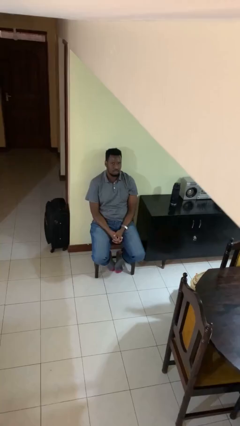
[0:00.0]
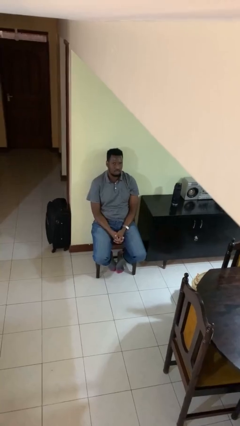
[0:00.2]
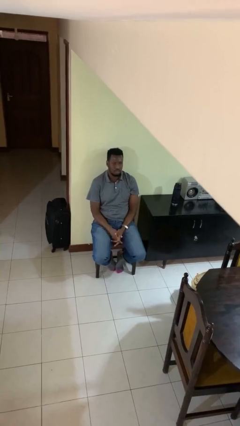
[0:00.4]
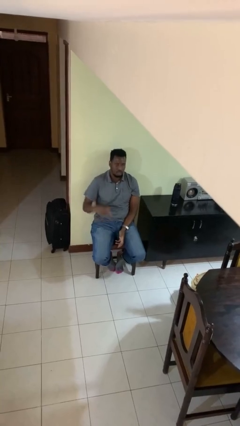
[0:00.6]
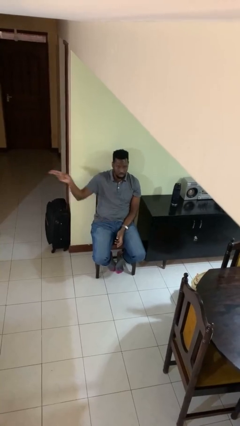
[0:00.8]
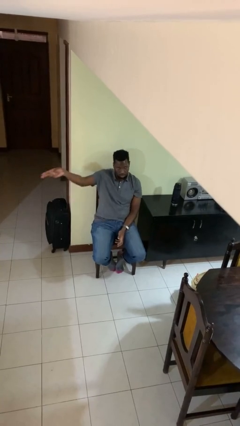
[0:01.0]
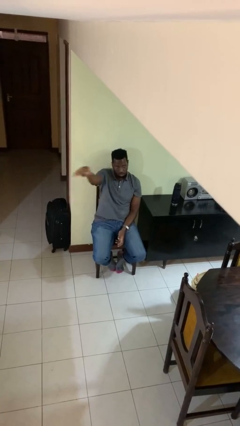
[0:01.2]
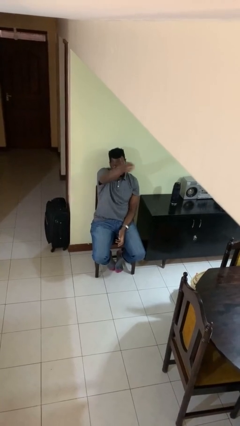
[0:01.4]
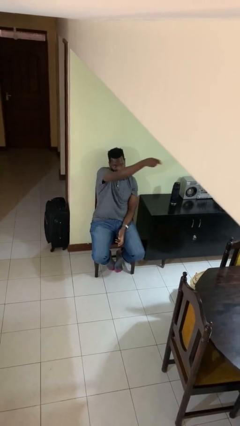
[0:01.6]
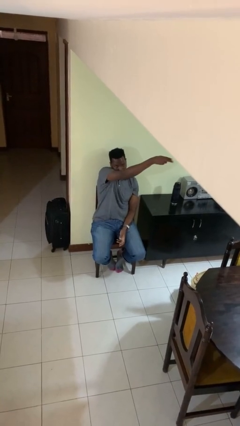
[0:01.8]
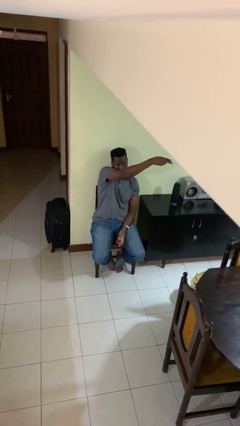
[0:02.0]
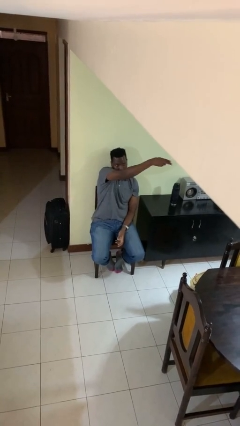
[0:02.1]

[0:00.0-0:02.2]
person gestures swipe left

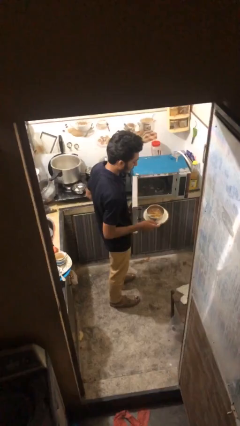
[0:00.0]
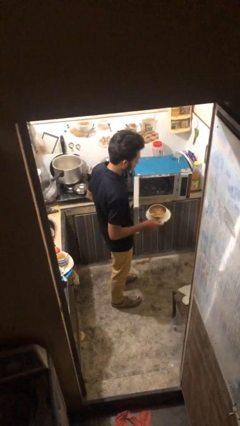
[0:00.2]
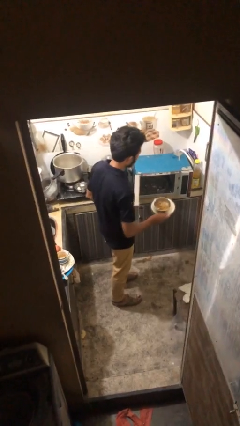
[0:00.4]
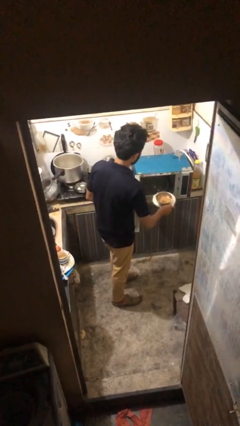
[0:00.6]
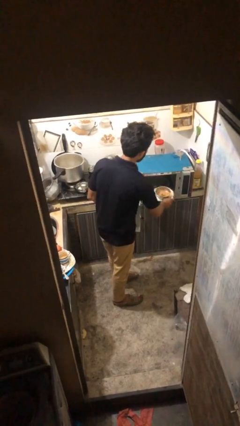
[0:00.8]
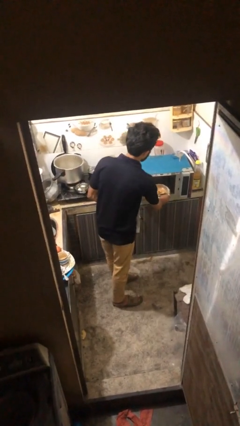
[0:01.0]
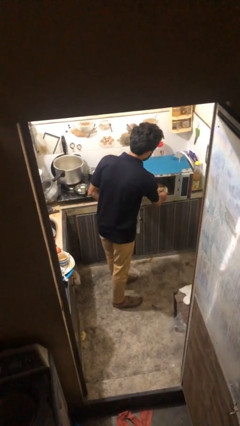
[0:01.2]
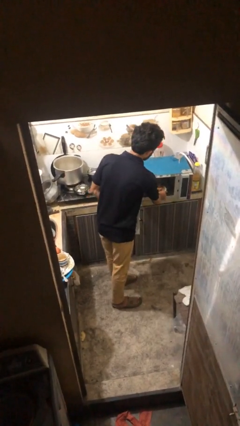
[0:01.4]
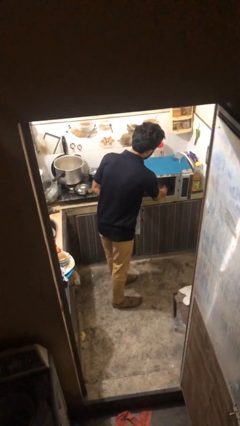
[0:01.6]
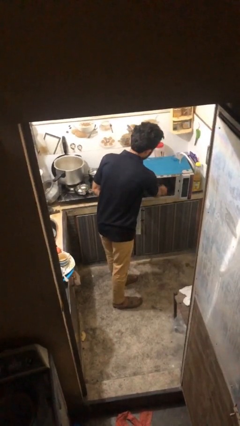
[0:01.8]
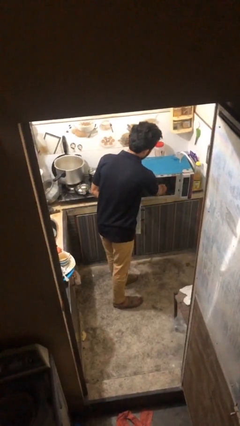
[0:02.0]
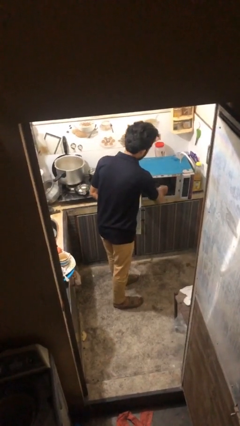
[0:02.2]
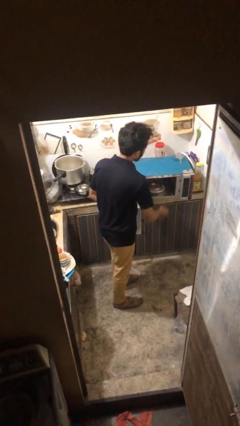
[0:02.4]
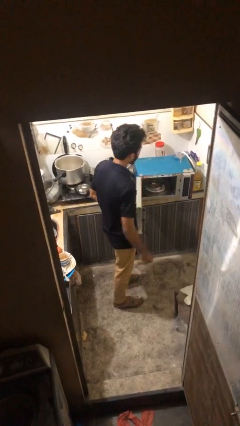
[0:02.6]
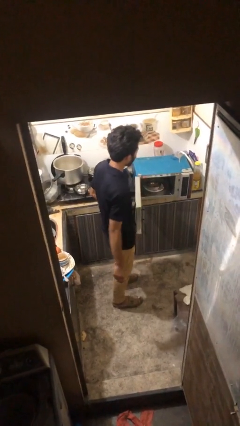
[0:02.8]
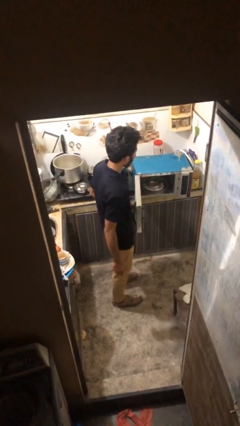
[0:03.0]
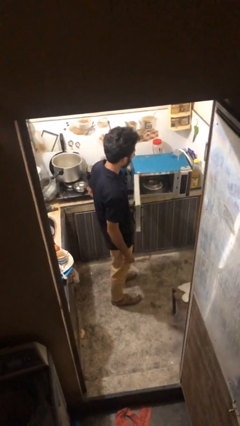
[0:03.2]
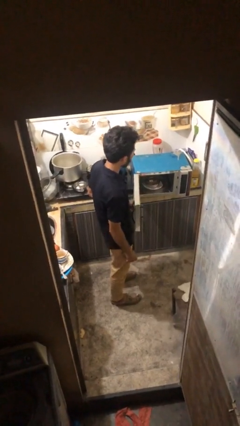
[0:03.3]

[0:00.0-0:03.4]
person puts object into microwave

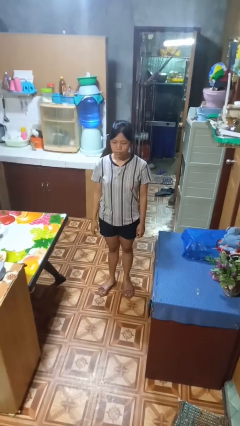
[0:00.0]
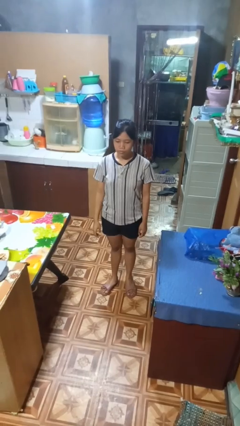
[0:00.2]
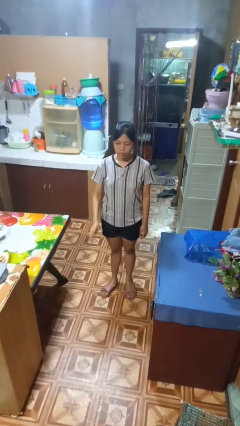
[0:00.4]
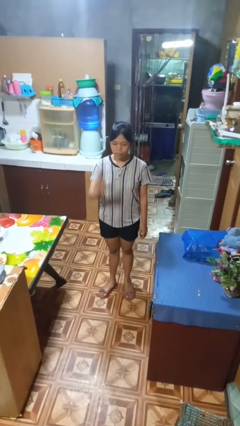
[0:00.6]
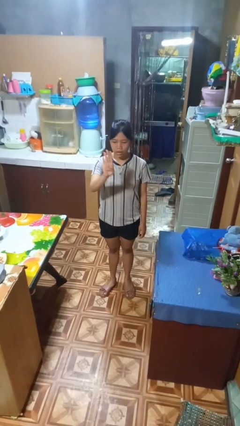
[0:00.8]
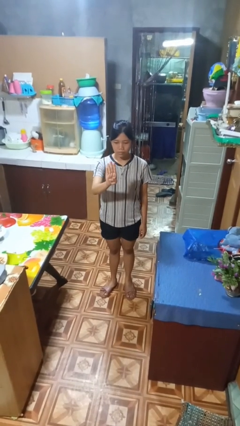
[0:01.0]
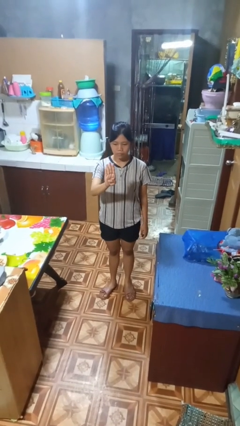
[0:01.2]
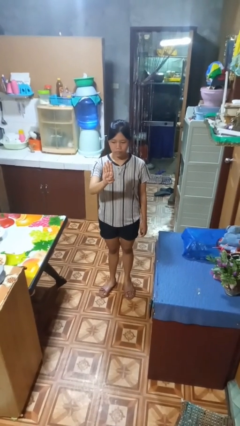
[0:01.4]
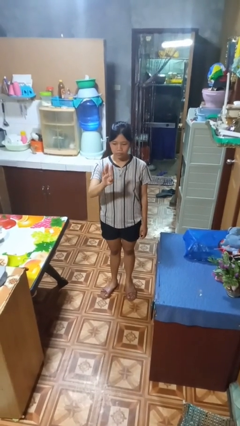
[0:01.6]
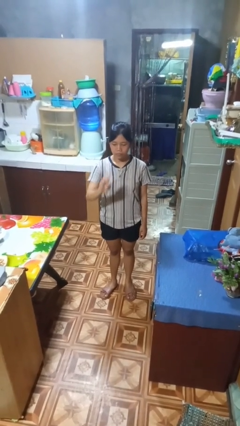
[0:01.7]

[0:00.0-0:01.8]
person gestures number four

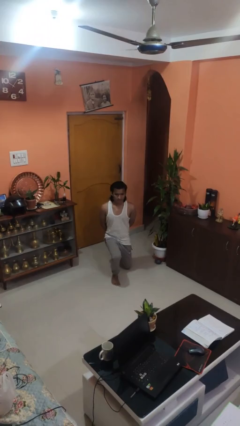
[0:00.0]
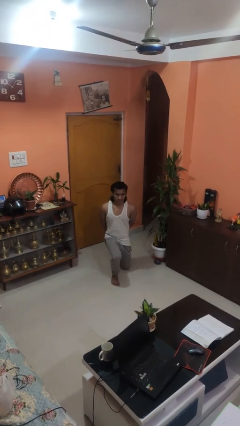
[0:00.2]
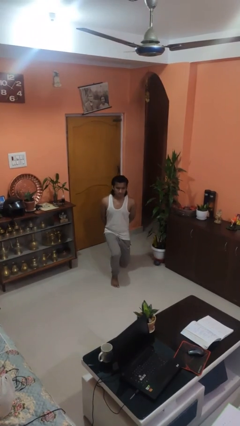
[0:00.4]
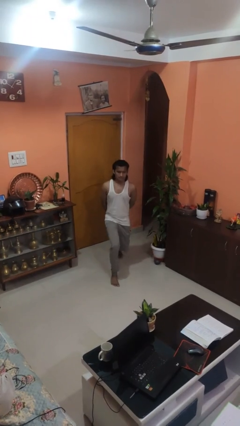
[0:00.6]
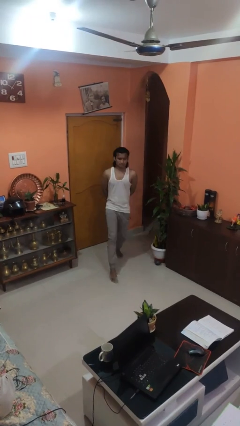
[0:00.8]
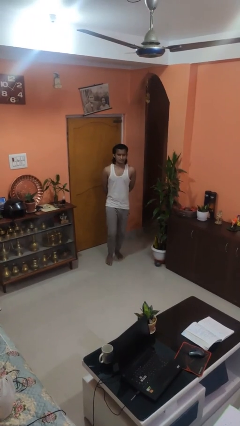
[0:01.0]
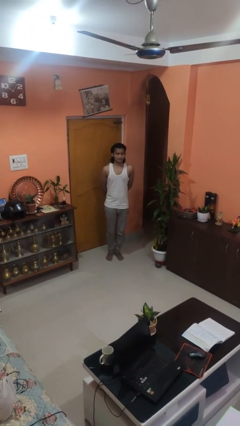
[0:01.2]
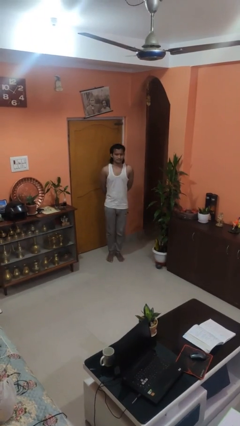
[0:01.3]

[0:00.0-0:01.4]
person stands up from floor

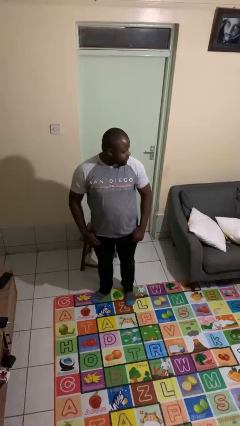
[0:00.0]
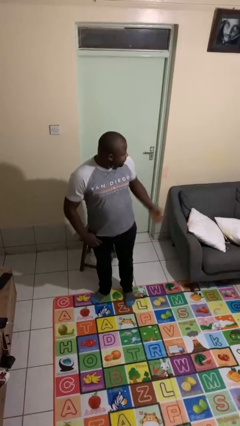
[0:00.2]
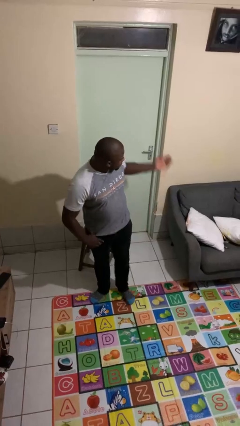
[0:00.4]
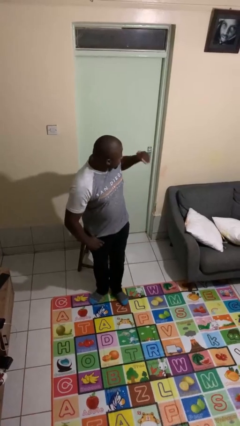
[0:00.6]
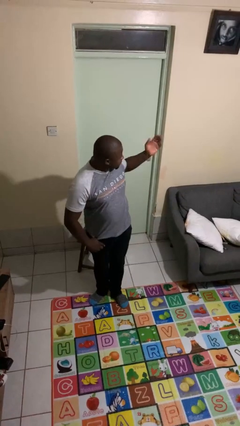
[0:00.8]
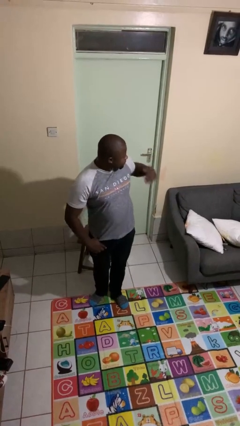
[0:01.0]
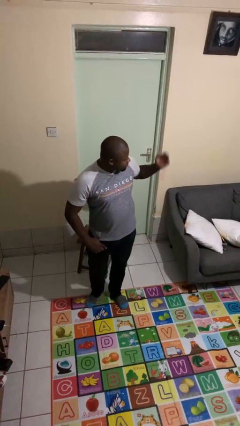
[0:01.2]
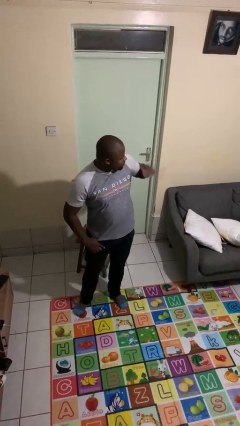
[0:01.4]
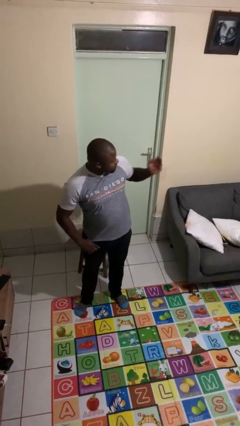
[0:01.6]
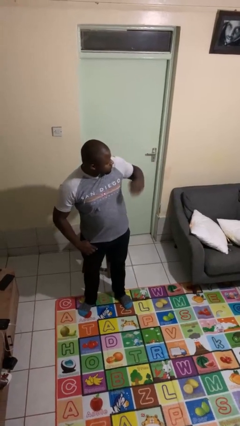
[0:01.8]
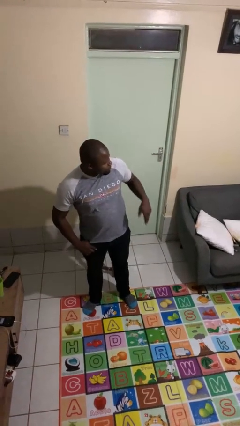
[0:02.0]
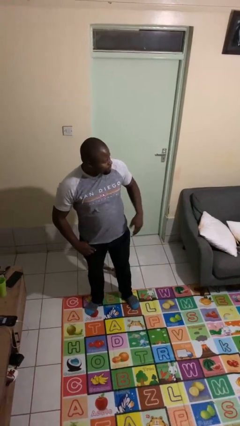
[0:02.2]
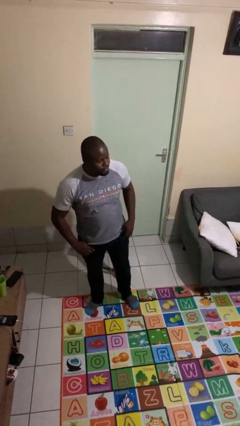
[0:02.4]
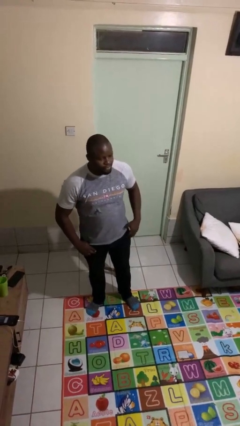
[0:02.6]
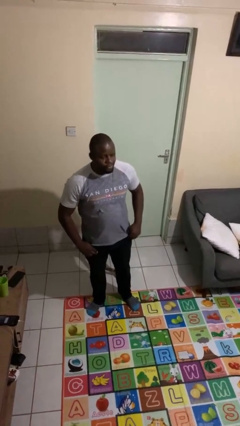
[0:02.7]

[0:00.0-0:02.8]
person gestures come here

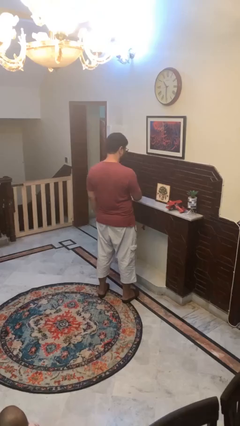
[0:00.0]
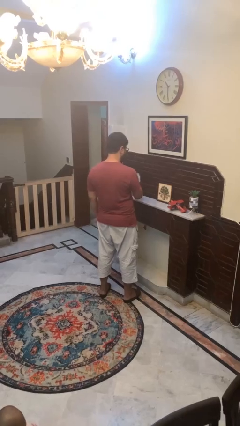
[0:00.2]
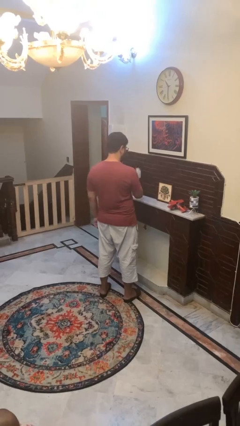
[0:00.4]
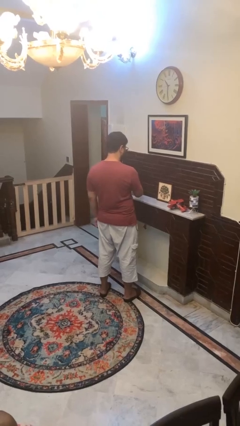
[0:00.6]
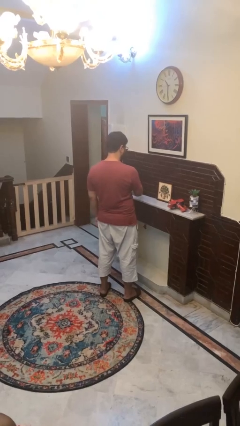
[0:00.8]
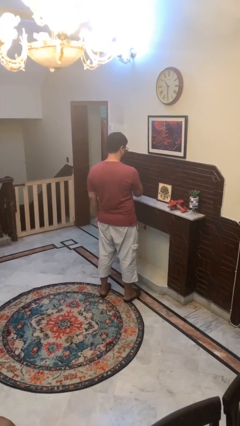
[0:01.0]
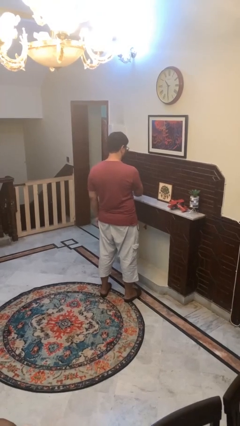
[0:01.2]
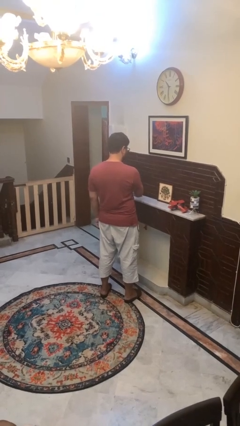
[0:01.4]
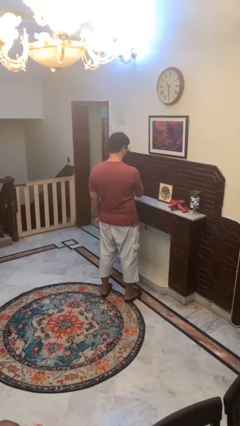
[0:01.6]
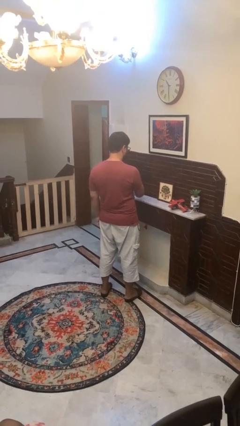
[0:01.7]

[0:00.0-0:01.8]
person dusts furniture

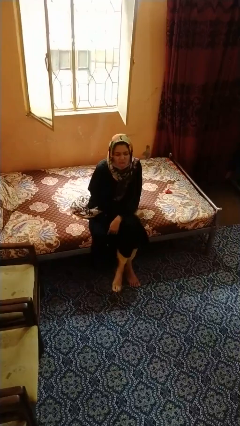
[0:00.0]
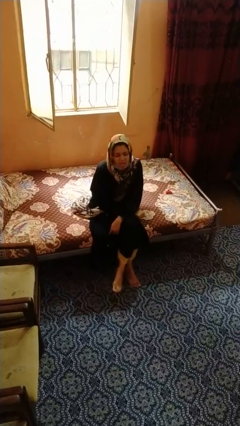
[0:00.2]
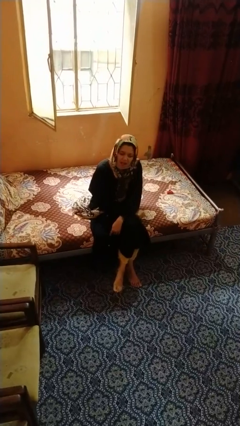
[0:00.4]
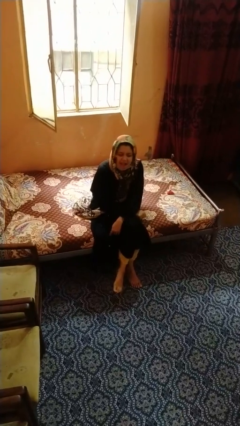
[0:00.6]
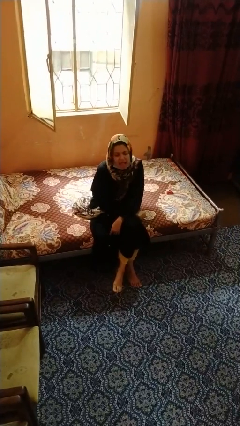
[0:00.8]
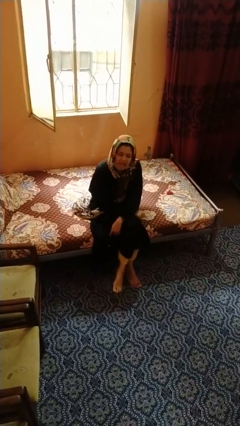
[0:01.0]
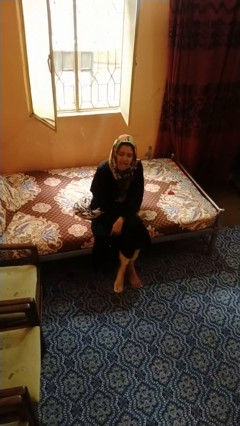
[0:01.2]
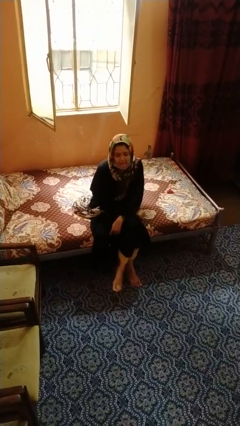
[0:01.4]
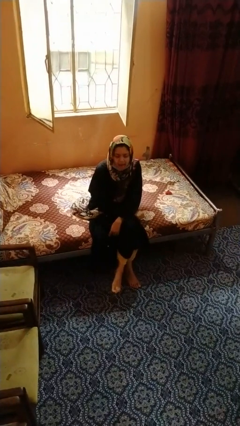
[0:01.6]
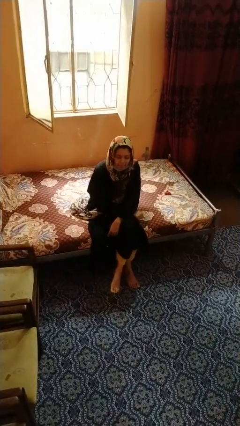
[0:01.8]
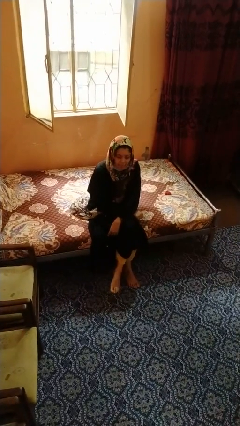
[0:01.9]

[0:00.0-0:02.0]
person sticks out tongue

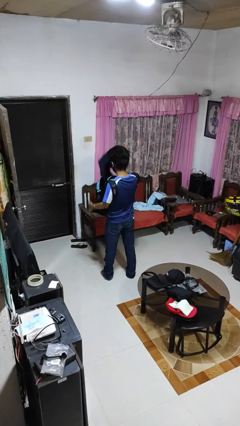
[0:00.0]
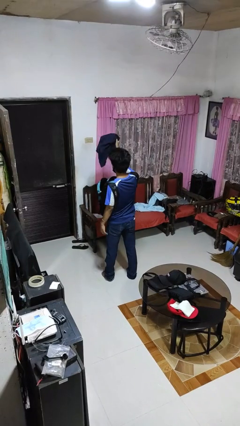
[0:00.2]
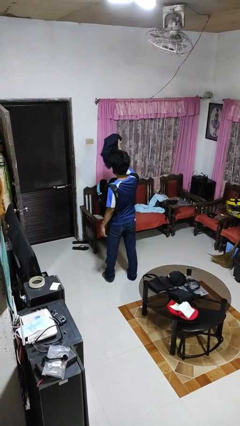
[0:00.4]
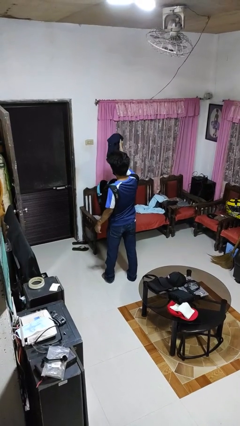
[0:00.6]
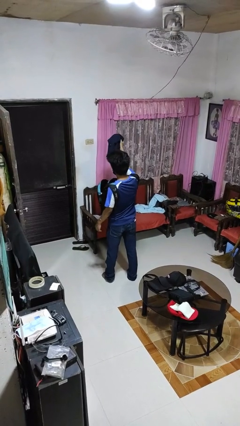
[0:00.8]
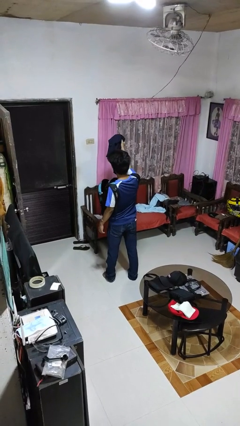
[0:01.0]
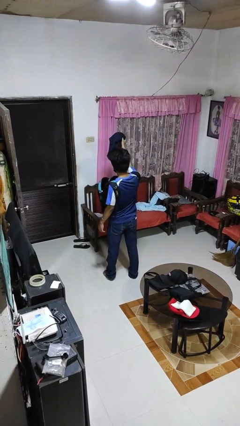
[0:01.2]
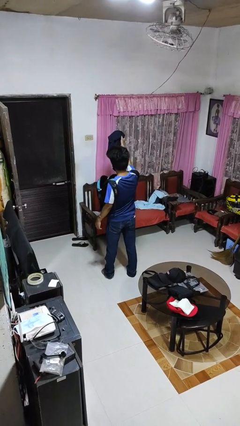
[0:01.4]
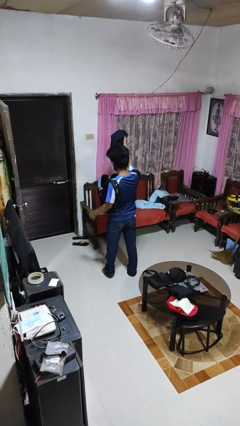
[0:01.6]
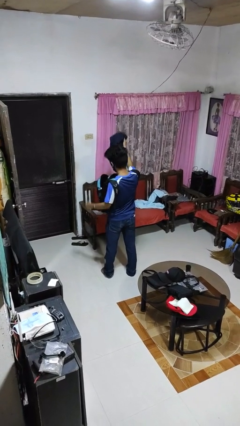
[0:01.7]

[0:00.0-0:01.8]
person takes object from backpack
